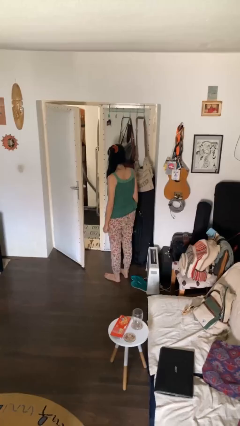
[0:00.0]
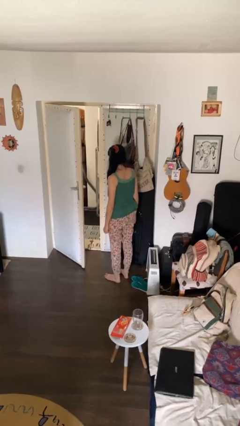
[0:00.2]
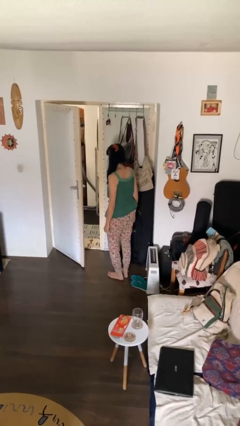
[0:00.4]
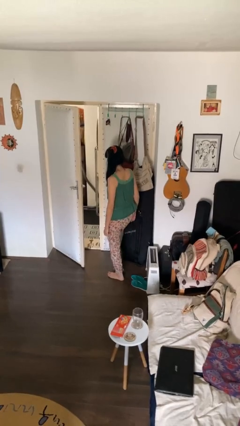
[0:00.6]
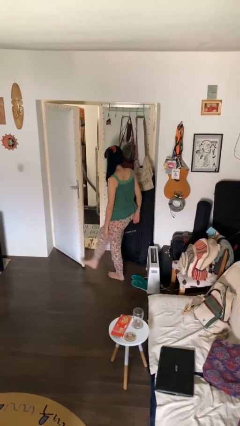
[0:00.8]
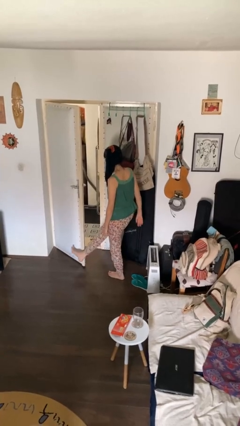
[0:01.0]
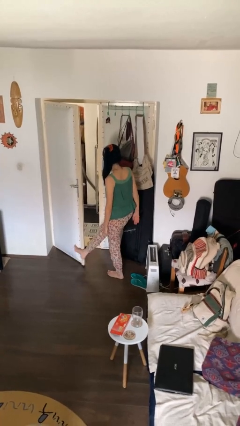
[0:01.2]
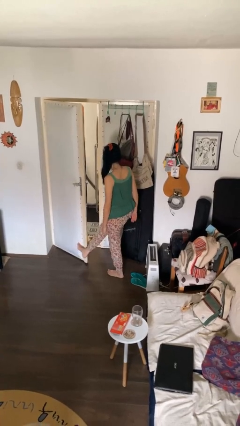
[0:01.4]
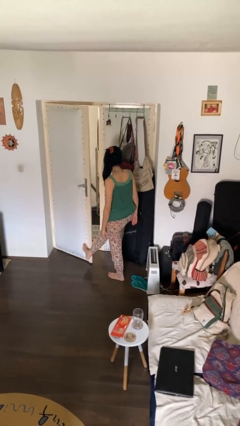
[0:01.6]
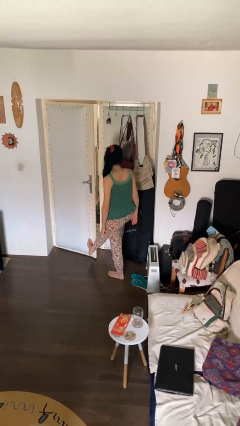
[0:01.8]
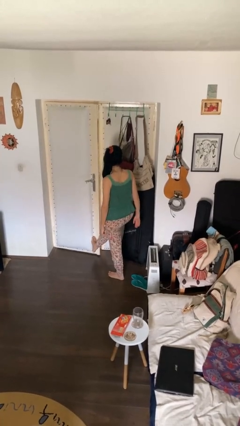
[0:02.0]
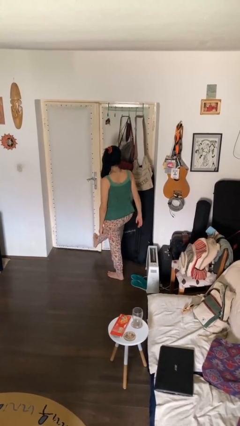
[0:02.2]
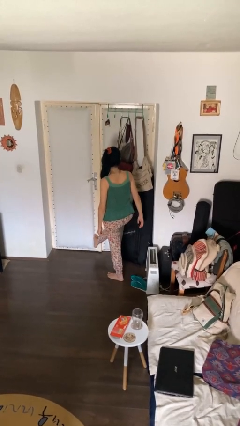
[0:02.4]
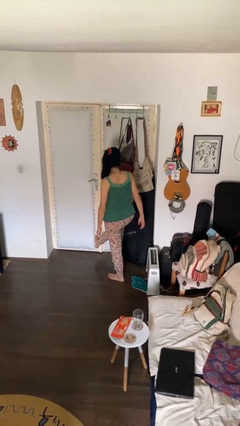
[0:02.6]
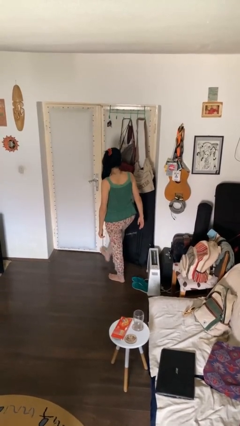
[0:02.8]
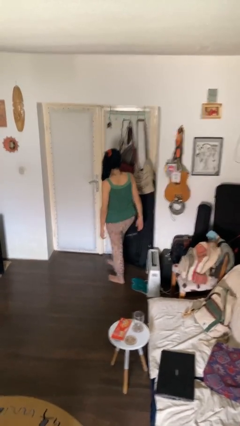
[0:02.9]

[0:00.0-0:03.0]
person closes door with foot

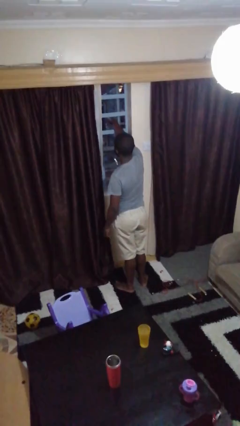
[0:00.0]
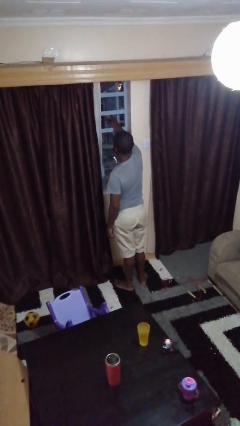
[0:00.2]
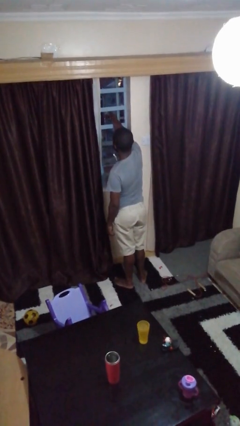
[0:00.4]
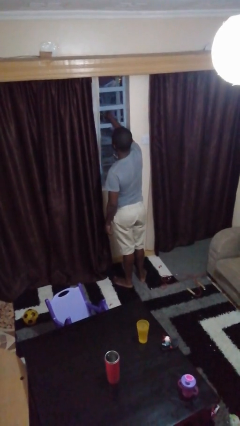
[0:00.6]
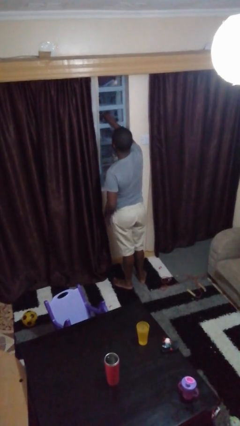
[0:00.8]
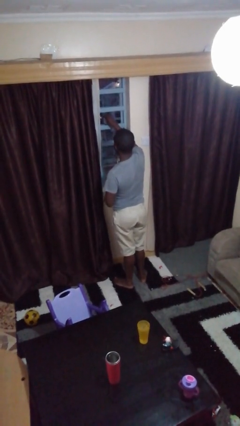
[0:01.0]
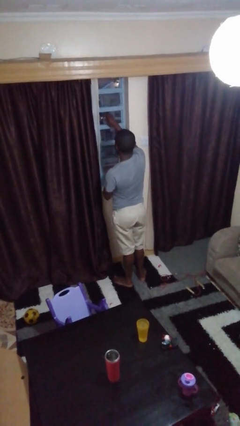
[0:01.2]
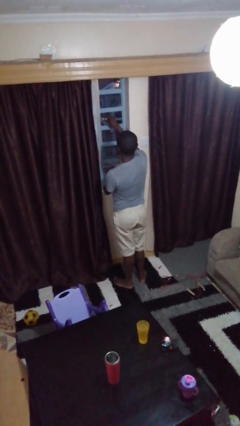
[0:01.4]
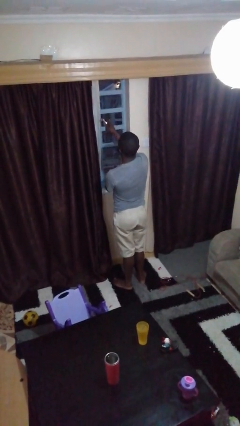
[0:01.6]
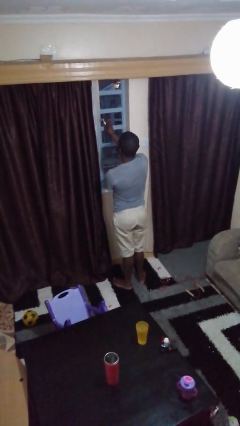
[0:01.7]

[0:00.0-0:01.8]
person closes home window

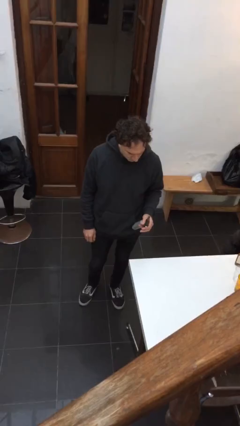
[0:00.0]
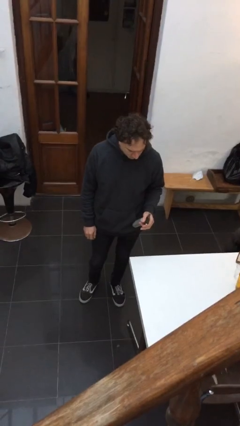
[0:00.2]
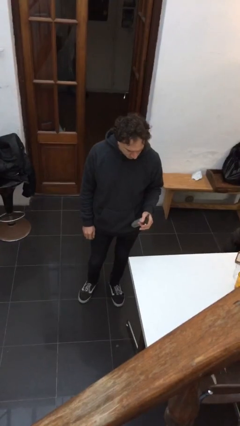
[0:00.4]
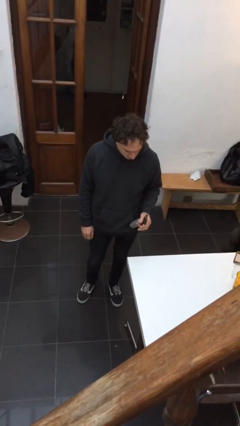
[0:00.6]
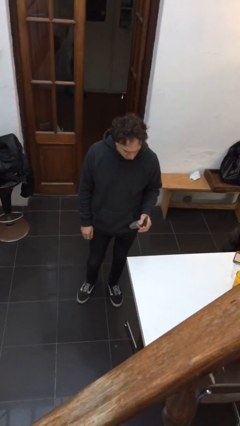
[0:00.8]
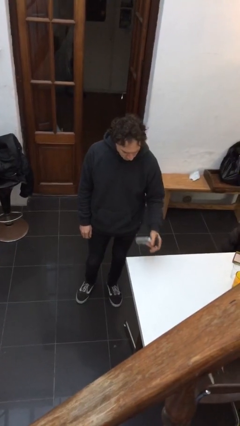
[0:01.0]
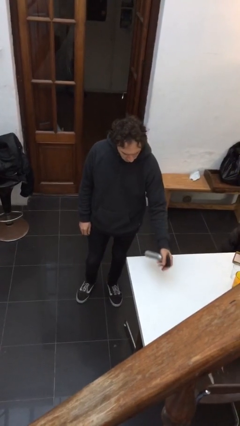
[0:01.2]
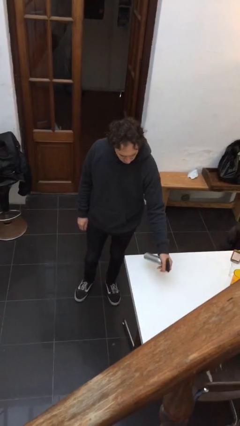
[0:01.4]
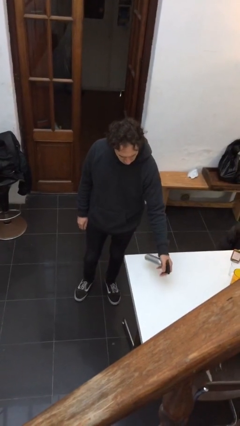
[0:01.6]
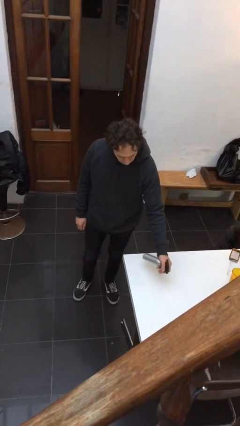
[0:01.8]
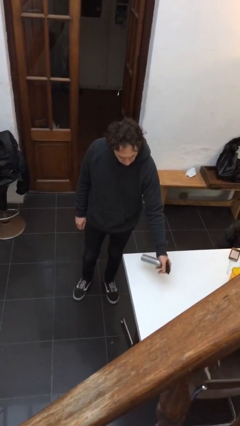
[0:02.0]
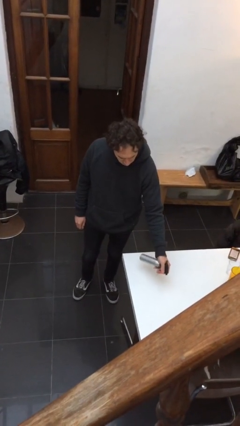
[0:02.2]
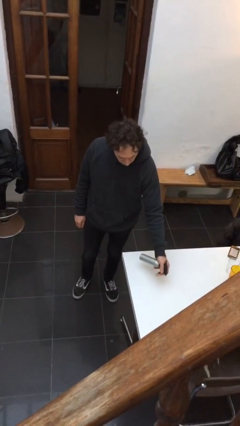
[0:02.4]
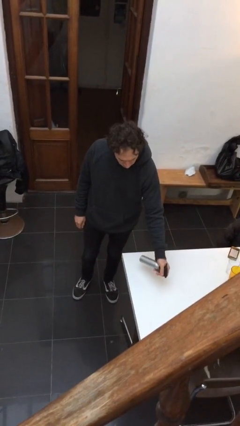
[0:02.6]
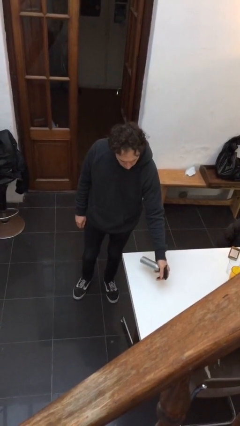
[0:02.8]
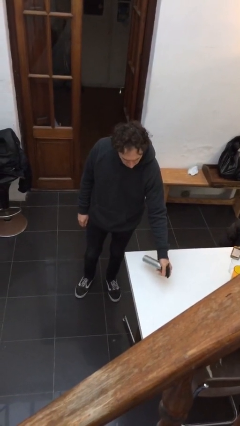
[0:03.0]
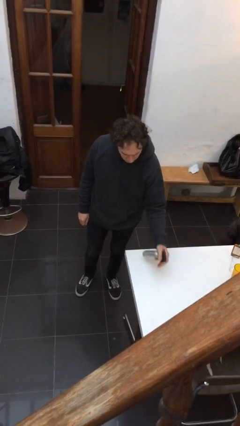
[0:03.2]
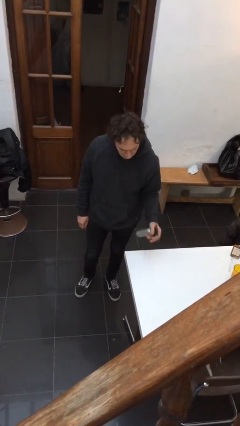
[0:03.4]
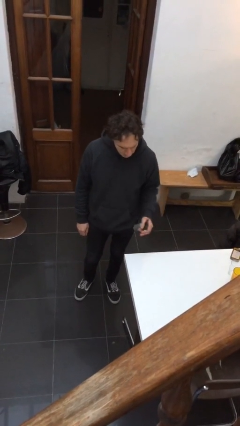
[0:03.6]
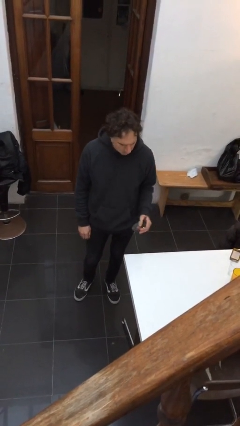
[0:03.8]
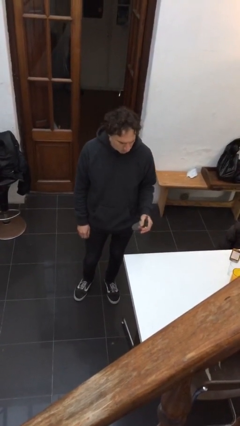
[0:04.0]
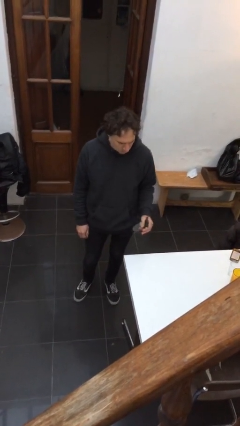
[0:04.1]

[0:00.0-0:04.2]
person sprays from bottle

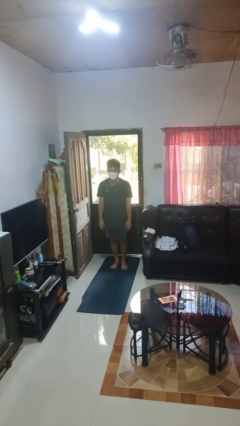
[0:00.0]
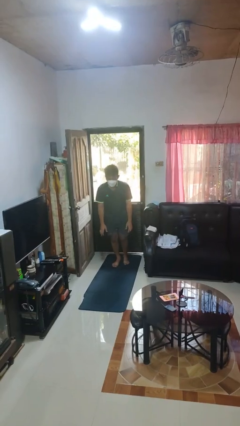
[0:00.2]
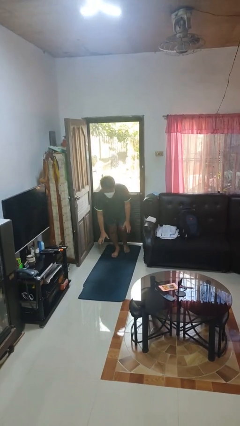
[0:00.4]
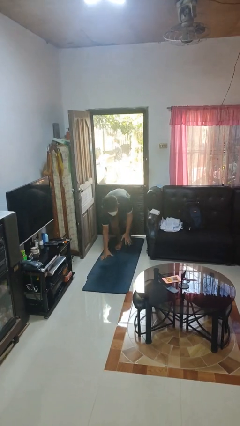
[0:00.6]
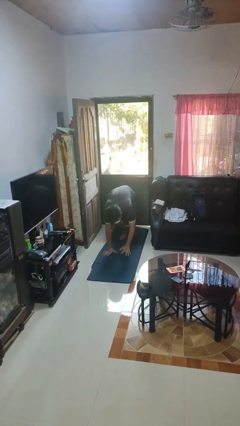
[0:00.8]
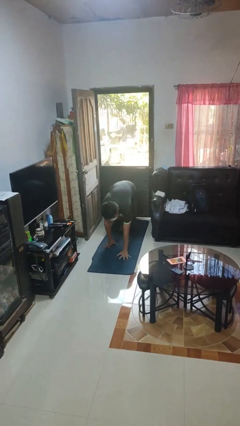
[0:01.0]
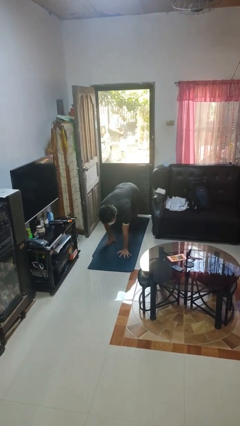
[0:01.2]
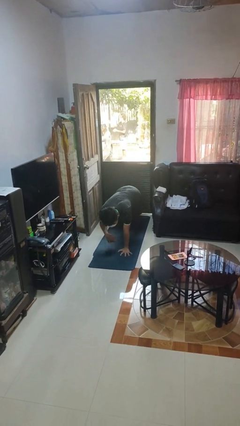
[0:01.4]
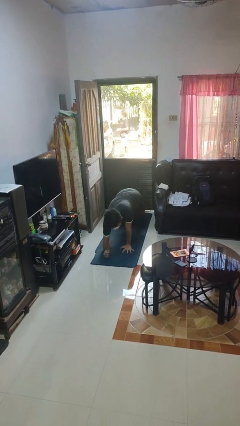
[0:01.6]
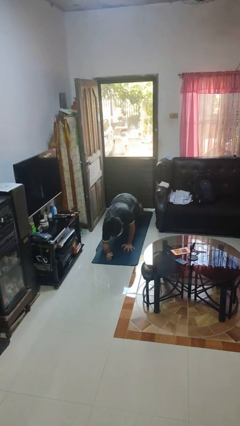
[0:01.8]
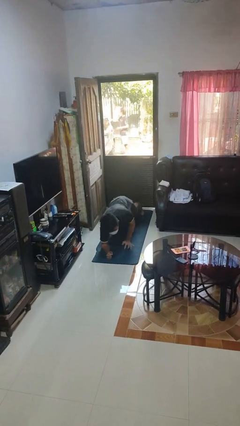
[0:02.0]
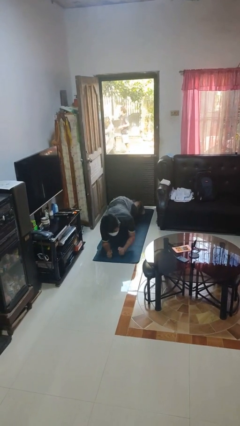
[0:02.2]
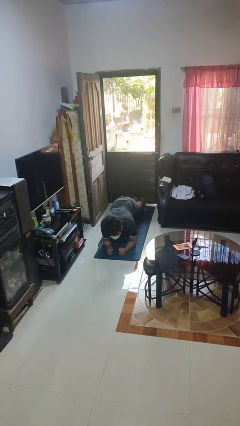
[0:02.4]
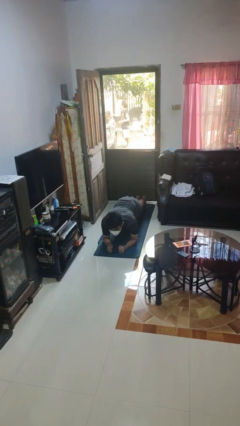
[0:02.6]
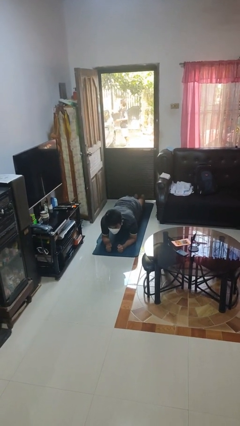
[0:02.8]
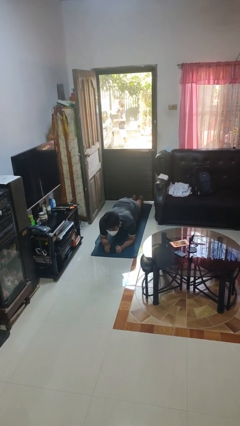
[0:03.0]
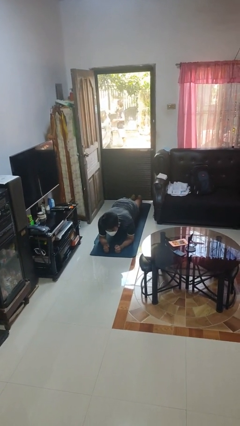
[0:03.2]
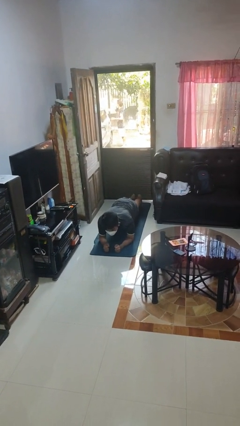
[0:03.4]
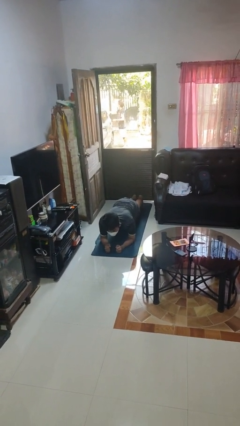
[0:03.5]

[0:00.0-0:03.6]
person exercises with plank

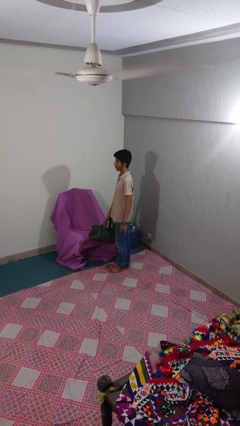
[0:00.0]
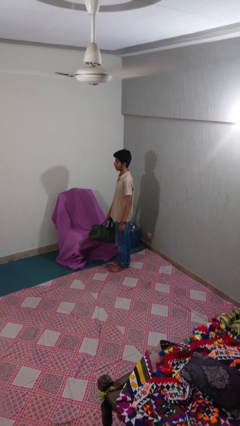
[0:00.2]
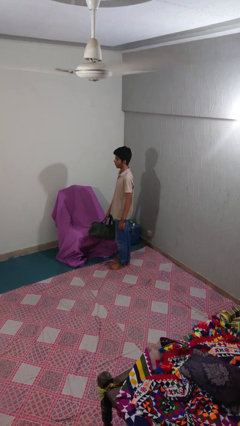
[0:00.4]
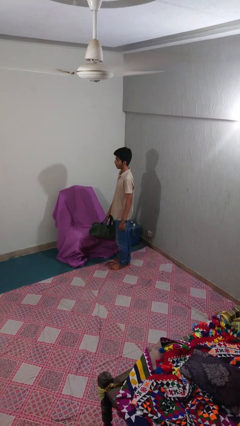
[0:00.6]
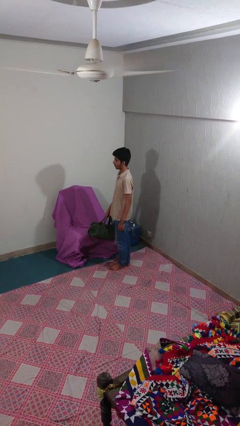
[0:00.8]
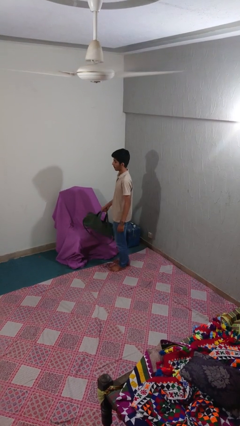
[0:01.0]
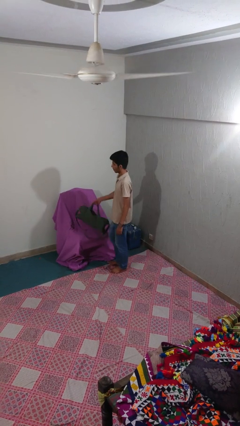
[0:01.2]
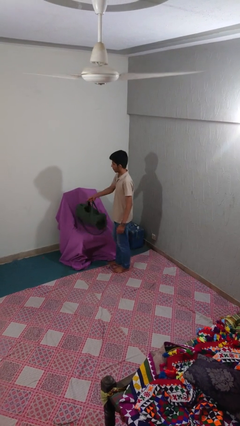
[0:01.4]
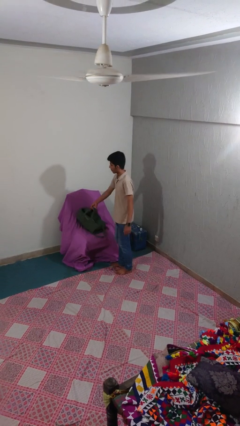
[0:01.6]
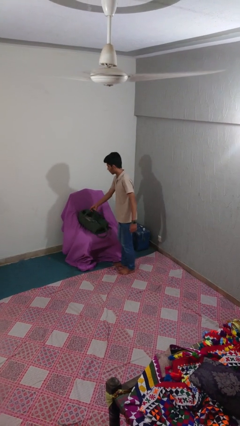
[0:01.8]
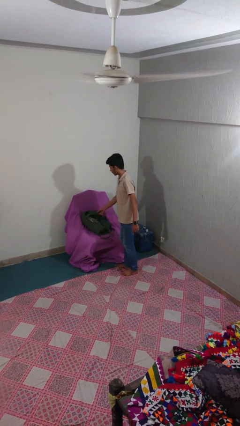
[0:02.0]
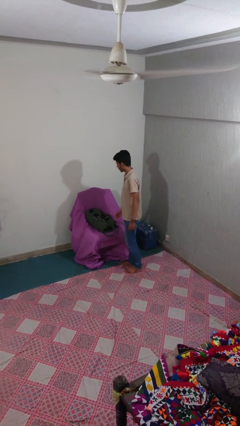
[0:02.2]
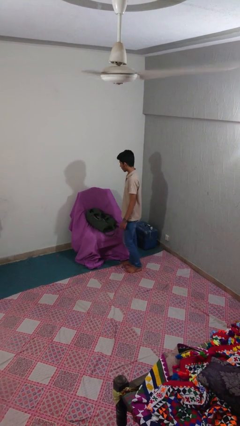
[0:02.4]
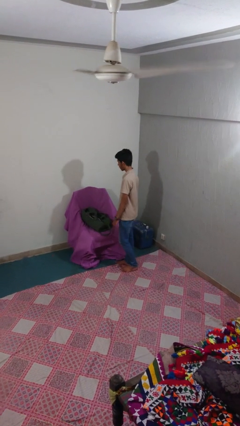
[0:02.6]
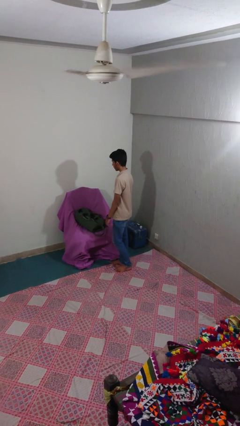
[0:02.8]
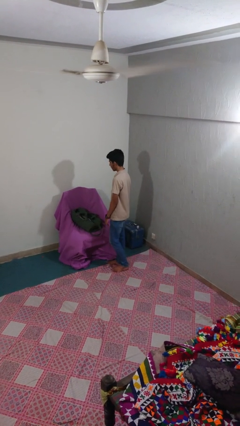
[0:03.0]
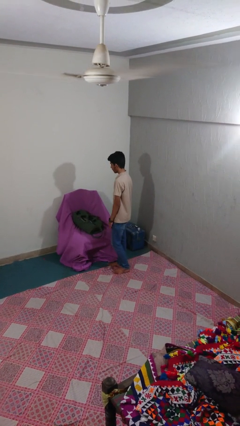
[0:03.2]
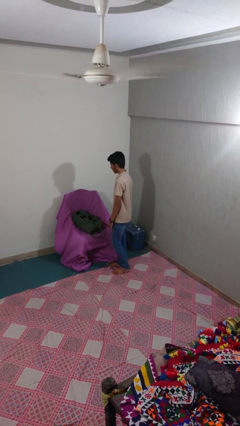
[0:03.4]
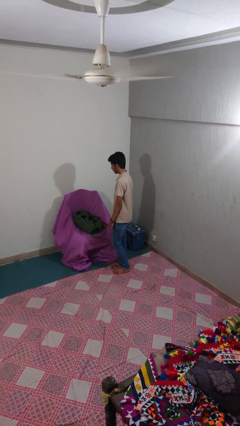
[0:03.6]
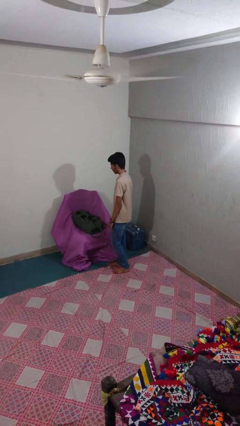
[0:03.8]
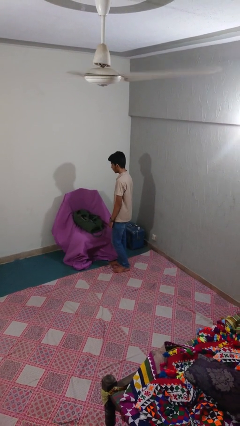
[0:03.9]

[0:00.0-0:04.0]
person puts down object on couch

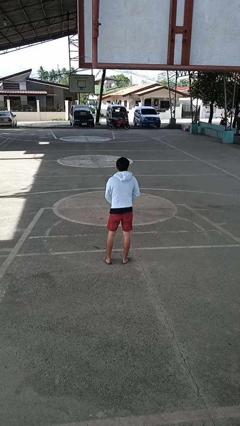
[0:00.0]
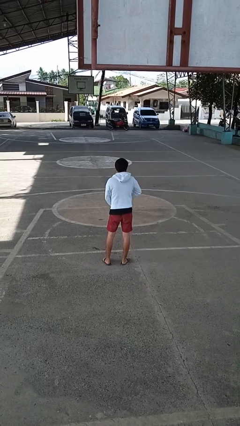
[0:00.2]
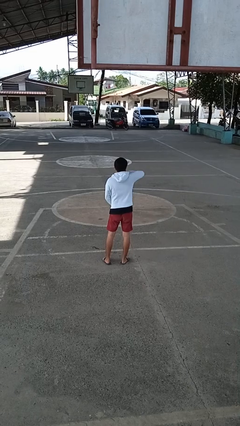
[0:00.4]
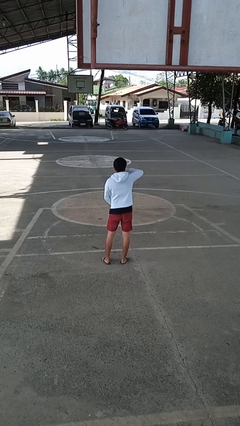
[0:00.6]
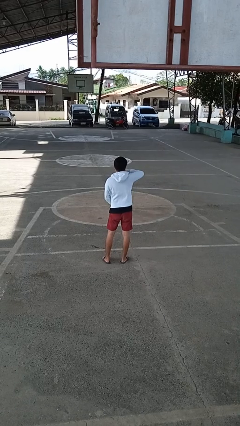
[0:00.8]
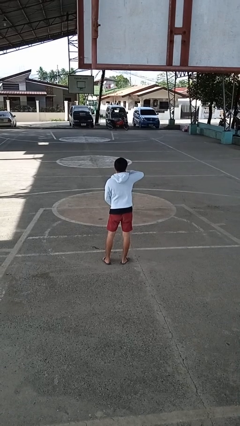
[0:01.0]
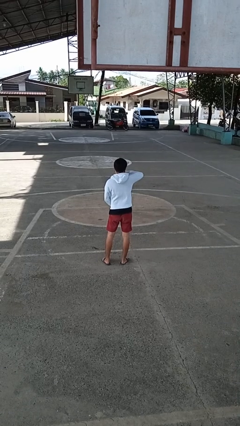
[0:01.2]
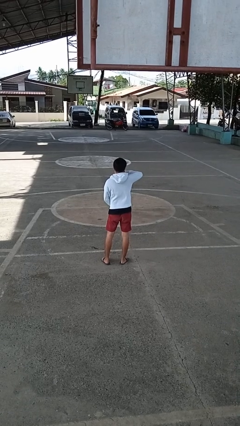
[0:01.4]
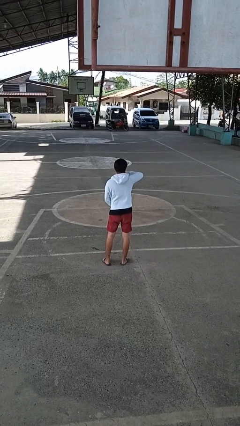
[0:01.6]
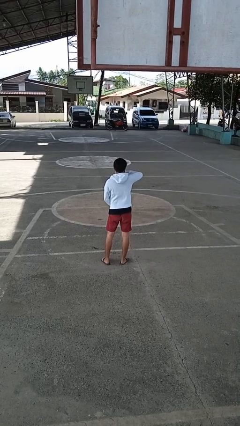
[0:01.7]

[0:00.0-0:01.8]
person zips up jacket
